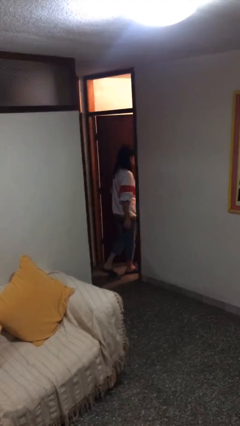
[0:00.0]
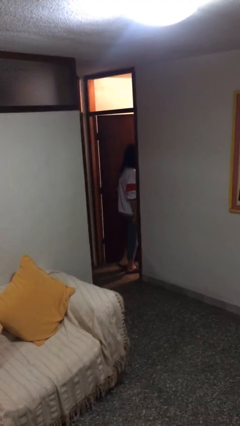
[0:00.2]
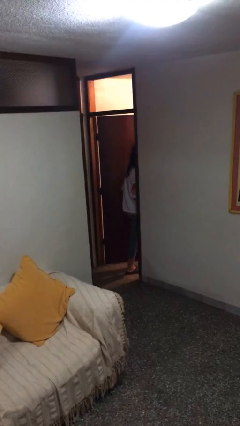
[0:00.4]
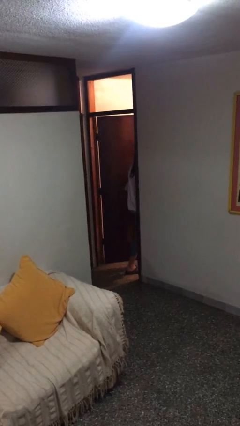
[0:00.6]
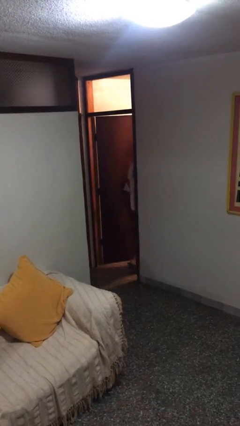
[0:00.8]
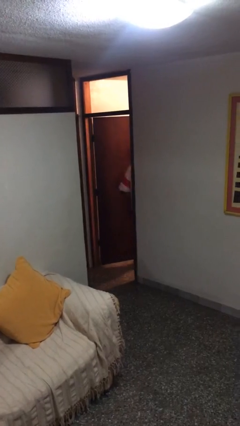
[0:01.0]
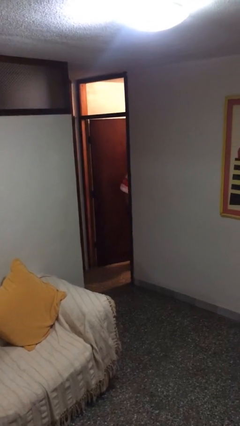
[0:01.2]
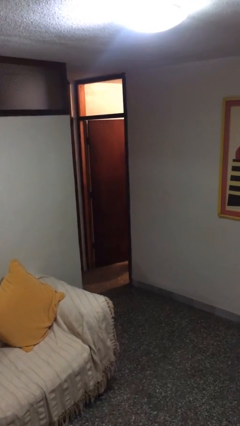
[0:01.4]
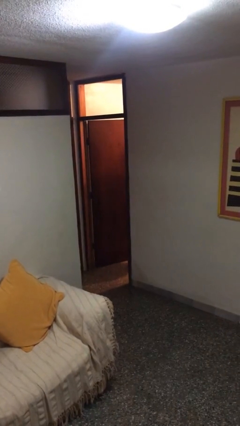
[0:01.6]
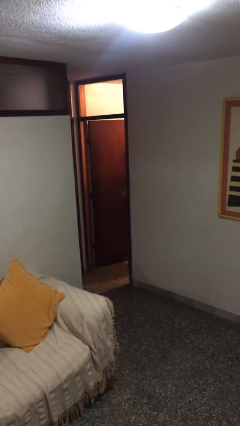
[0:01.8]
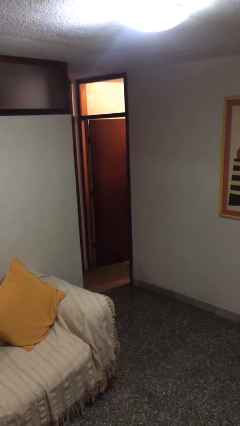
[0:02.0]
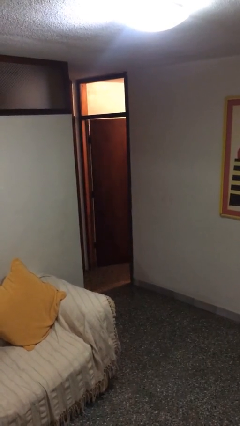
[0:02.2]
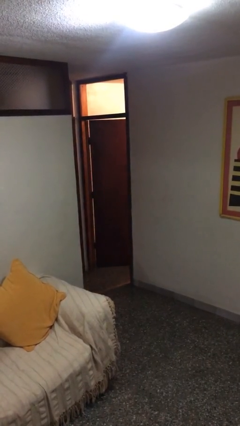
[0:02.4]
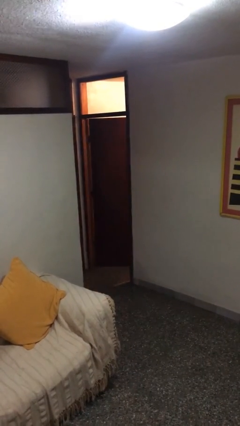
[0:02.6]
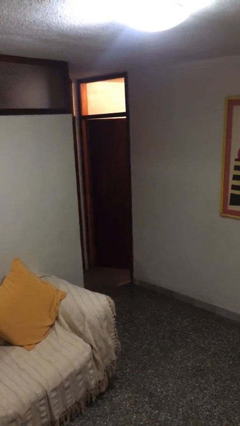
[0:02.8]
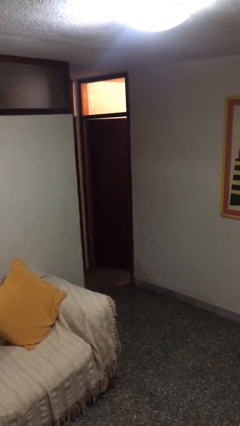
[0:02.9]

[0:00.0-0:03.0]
person exits scene through structure

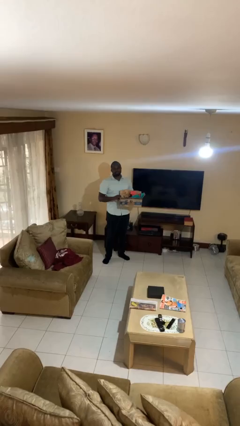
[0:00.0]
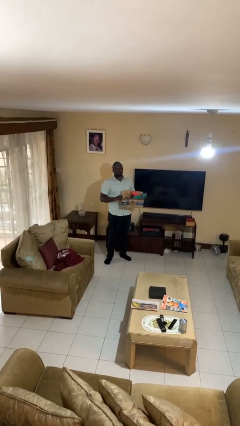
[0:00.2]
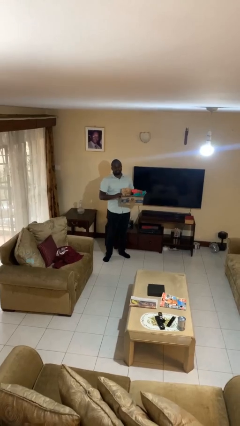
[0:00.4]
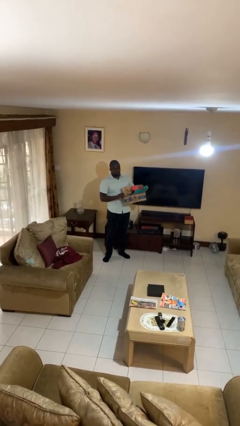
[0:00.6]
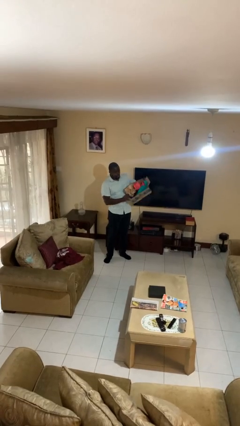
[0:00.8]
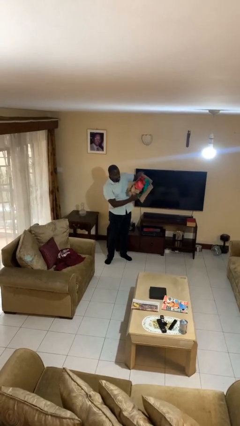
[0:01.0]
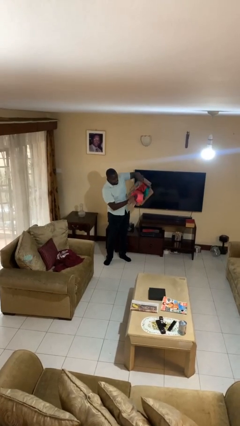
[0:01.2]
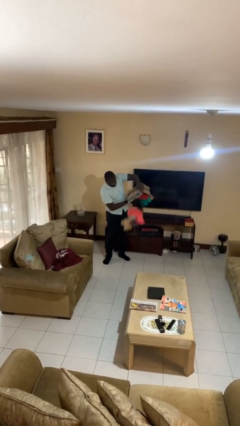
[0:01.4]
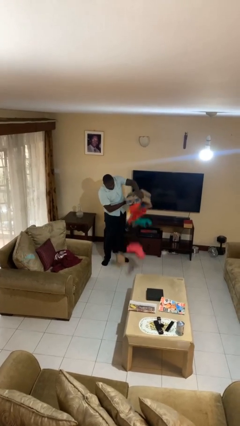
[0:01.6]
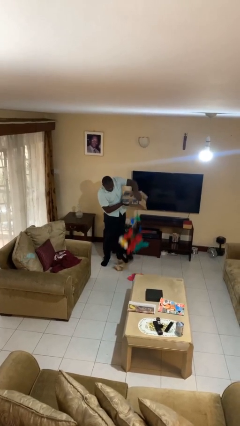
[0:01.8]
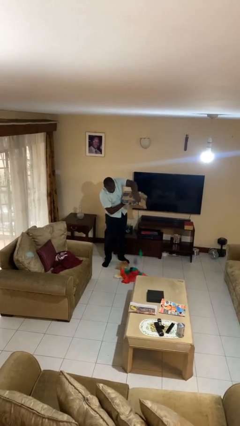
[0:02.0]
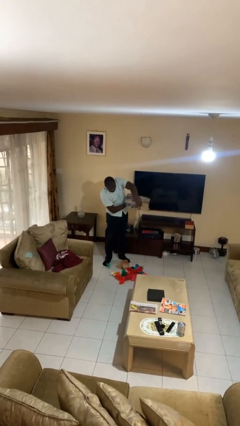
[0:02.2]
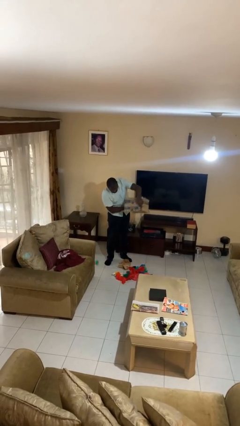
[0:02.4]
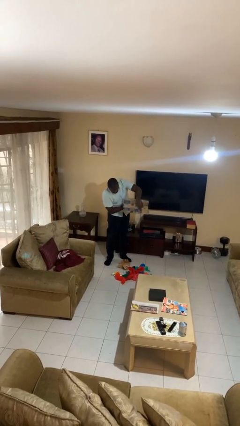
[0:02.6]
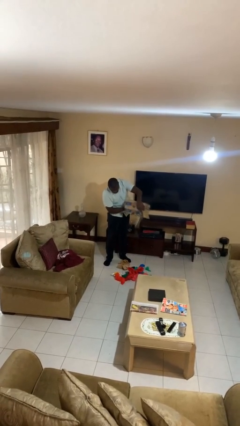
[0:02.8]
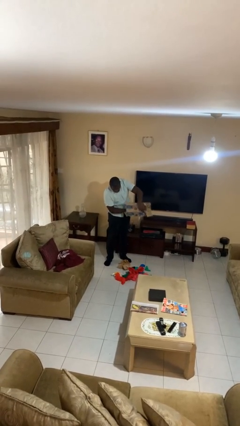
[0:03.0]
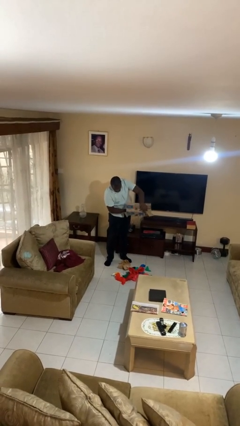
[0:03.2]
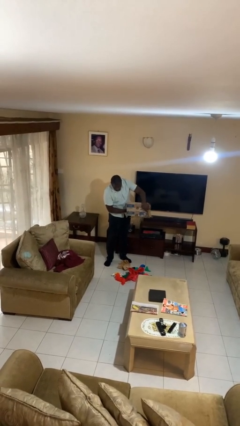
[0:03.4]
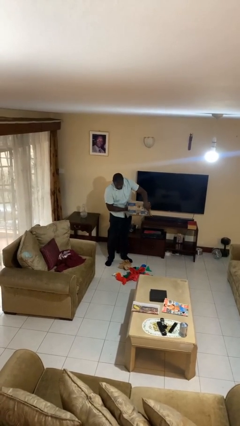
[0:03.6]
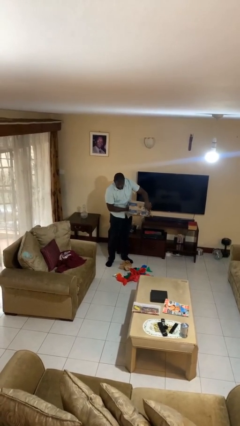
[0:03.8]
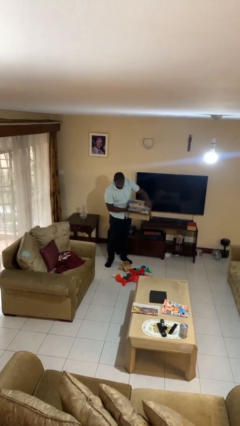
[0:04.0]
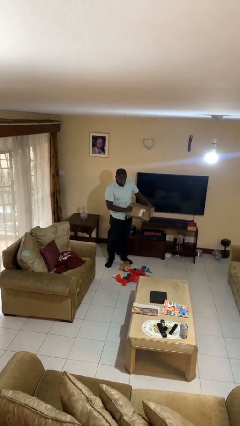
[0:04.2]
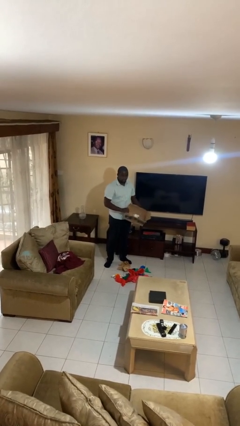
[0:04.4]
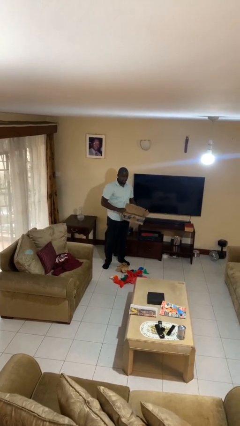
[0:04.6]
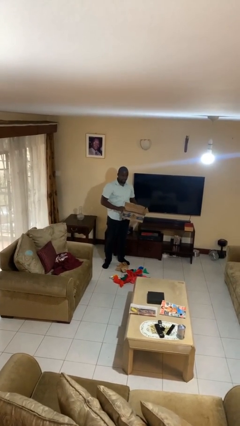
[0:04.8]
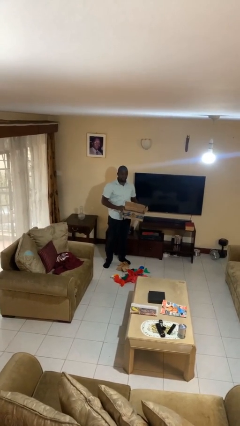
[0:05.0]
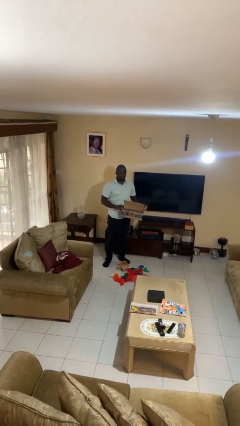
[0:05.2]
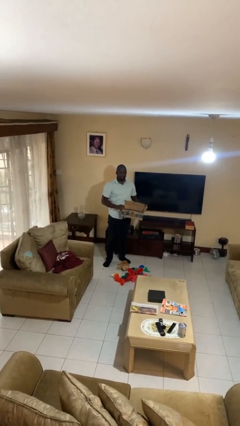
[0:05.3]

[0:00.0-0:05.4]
person unloads box onto floor

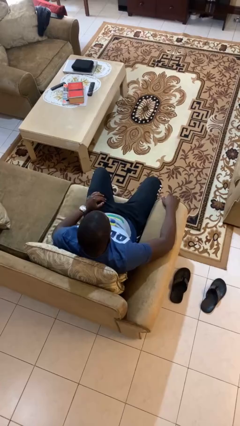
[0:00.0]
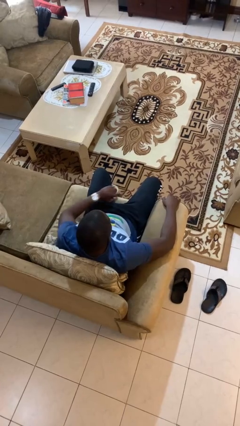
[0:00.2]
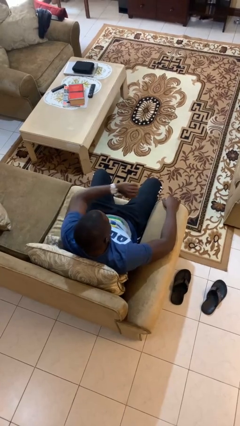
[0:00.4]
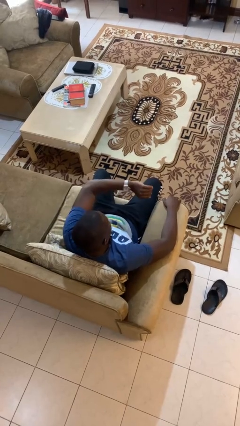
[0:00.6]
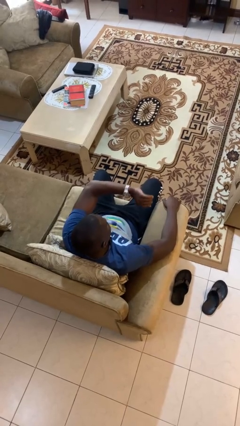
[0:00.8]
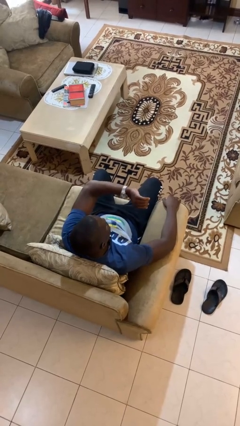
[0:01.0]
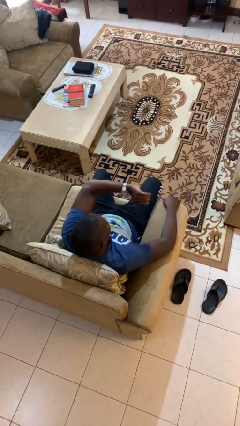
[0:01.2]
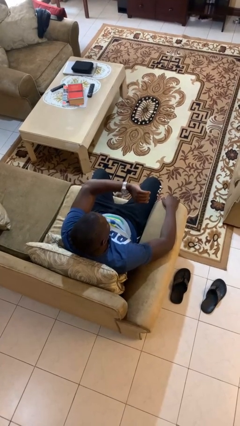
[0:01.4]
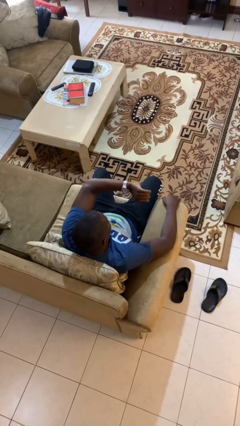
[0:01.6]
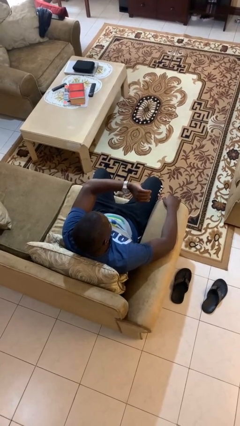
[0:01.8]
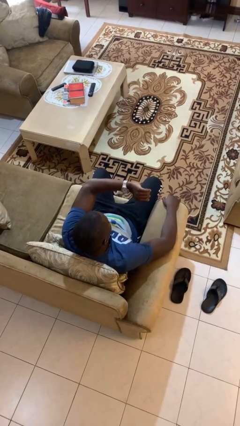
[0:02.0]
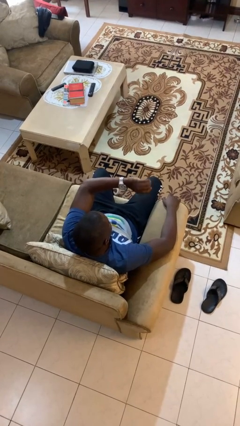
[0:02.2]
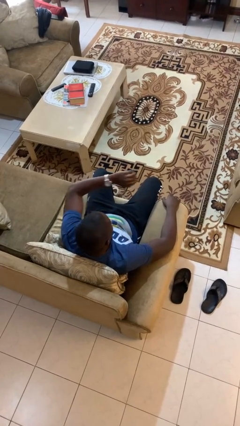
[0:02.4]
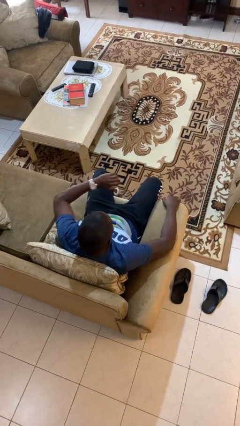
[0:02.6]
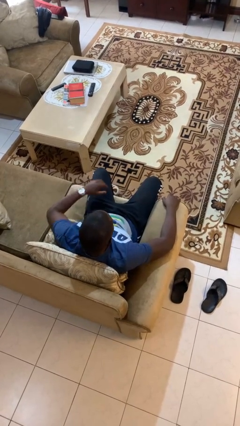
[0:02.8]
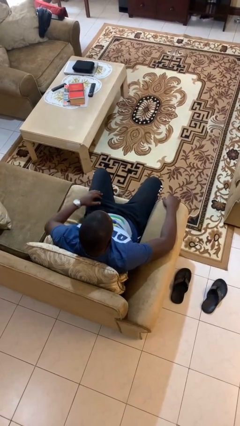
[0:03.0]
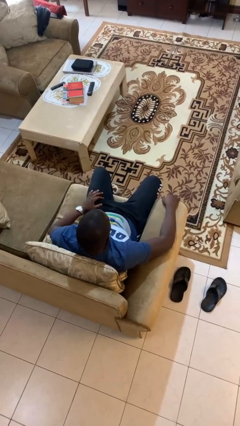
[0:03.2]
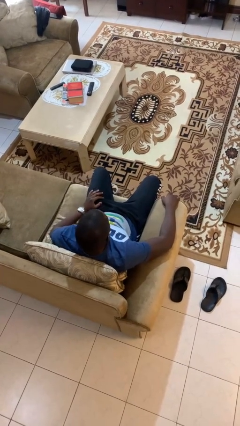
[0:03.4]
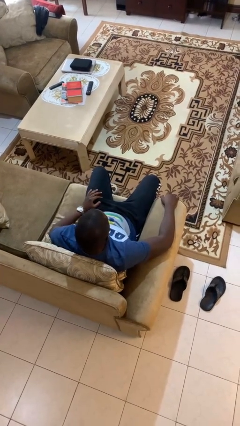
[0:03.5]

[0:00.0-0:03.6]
person looks at wristwatch

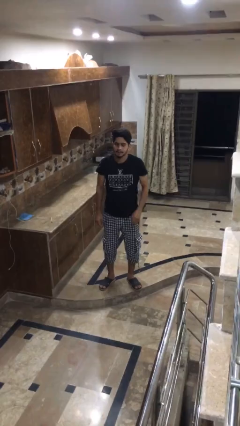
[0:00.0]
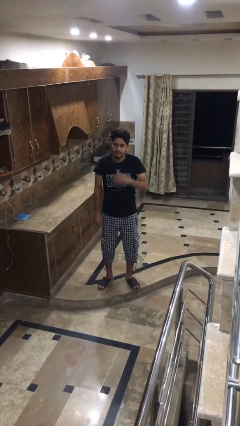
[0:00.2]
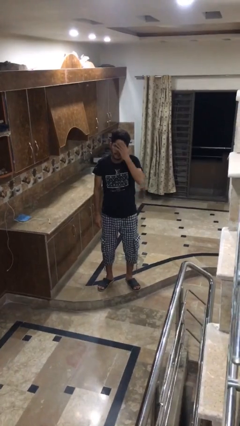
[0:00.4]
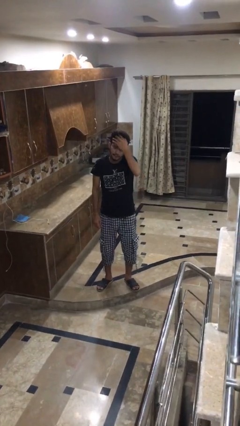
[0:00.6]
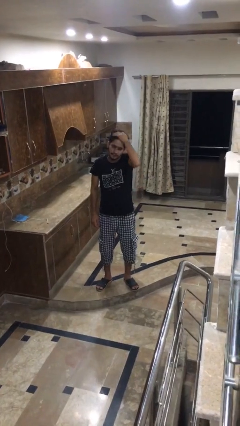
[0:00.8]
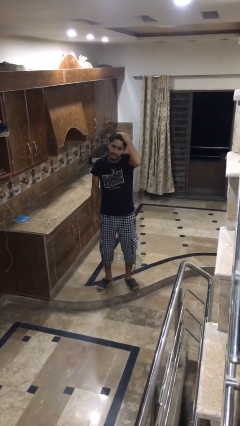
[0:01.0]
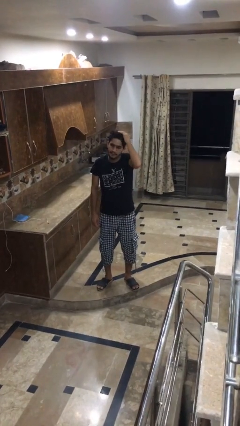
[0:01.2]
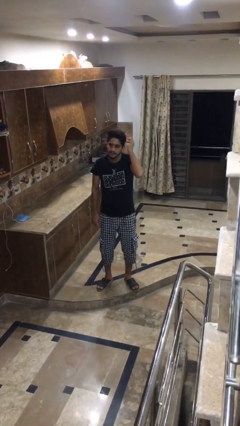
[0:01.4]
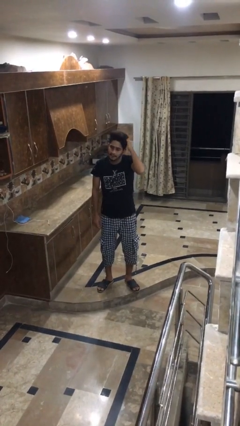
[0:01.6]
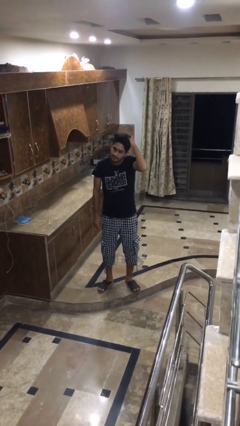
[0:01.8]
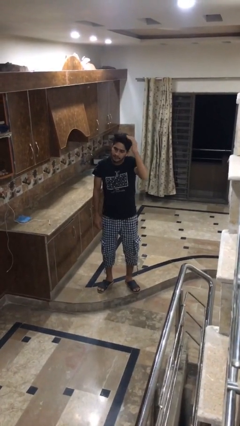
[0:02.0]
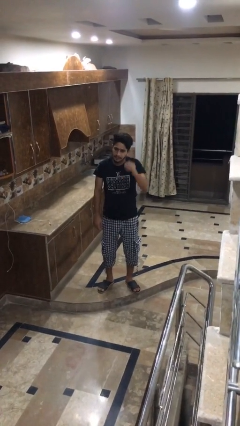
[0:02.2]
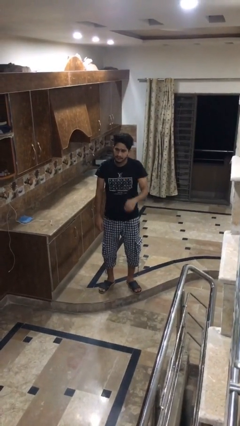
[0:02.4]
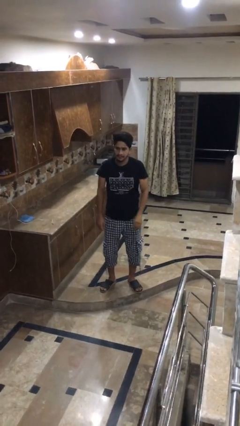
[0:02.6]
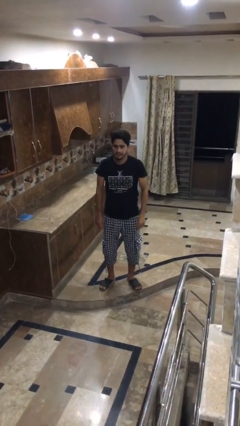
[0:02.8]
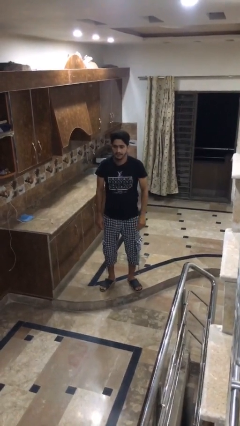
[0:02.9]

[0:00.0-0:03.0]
person strokes hair

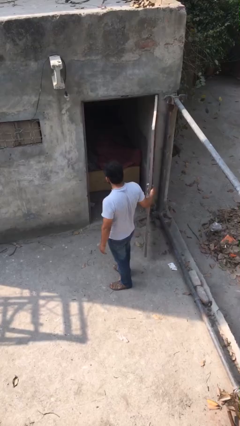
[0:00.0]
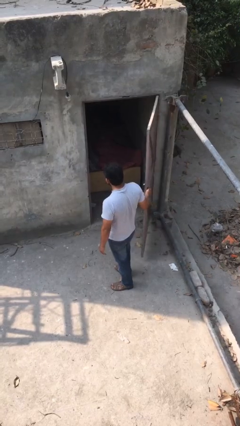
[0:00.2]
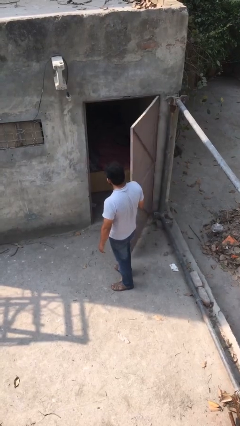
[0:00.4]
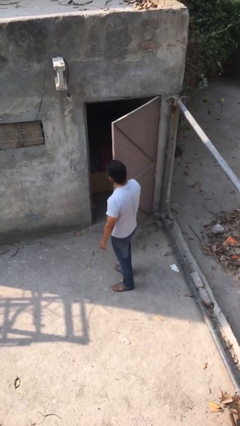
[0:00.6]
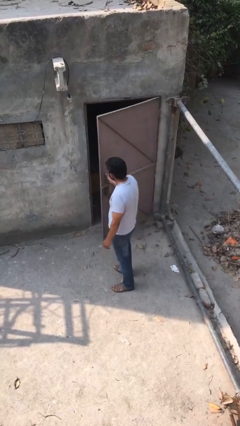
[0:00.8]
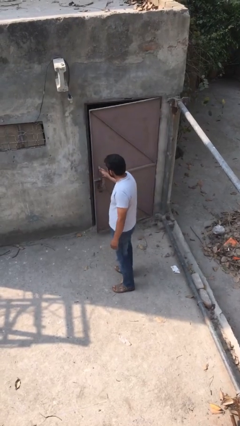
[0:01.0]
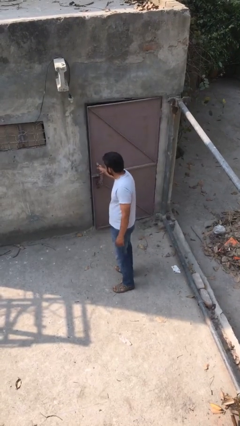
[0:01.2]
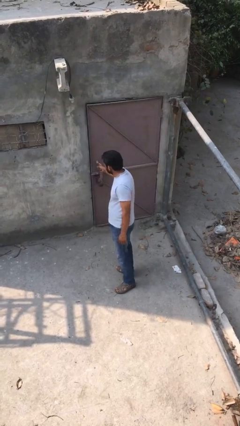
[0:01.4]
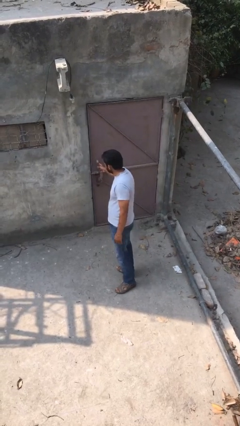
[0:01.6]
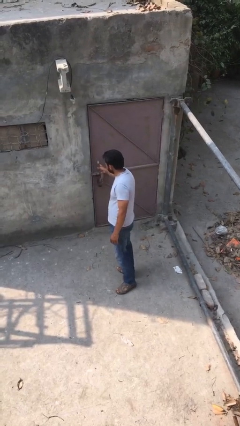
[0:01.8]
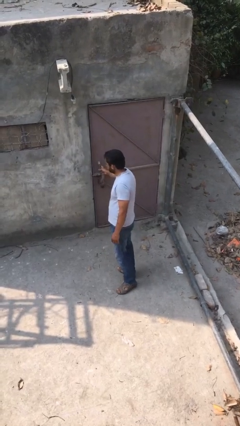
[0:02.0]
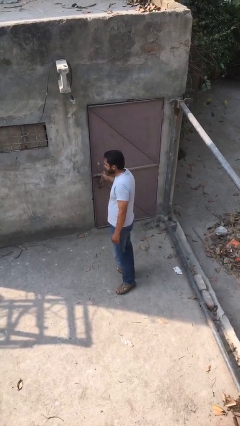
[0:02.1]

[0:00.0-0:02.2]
person closes facility door

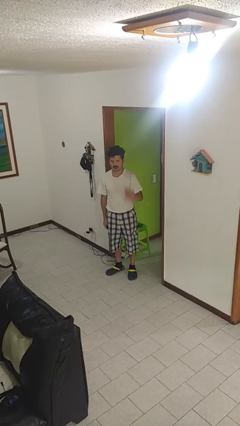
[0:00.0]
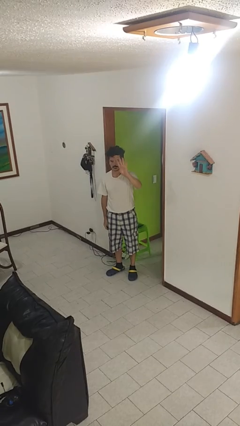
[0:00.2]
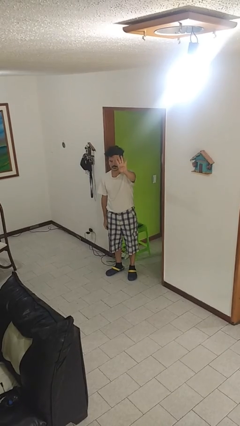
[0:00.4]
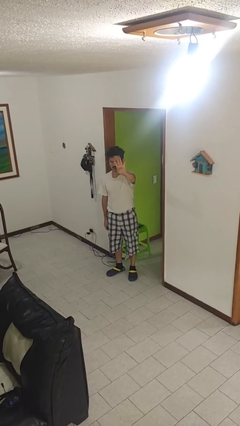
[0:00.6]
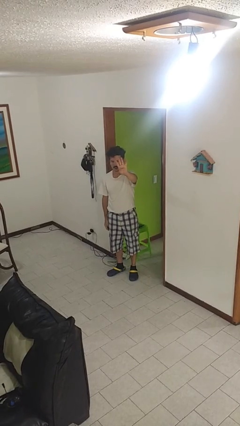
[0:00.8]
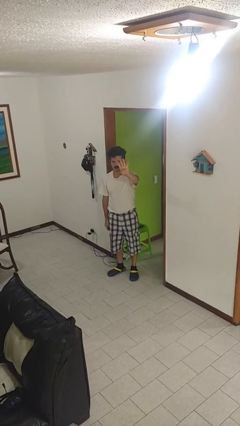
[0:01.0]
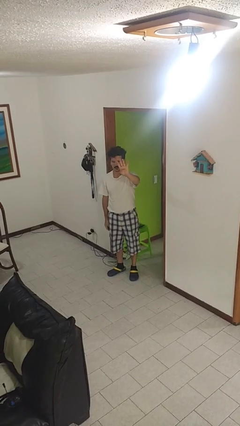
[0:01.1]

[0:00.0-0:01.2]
person gestures number four
